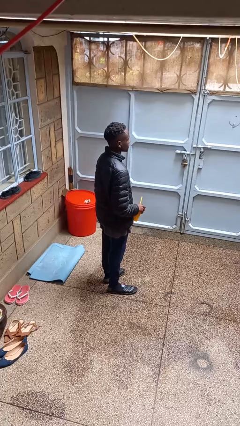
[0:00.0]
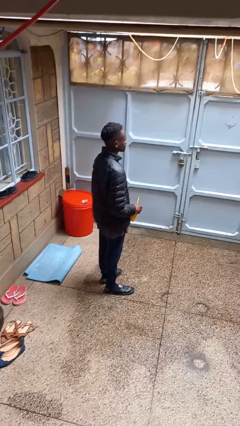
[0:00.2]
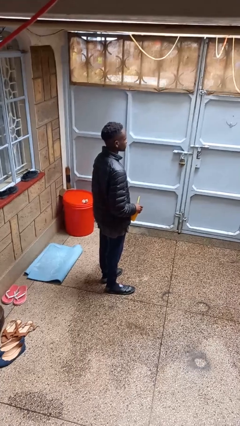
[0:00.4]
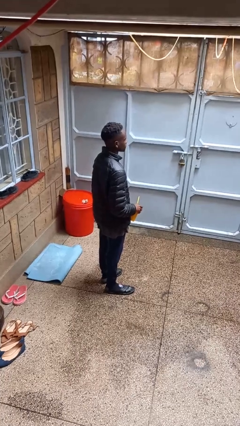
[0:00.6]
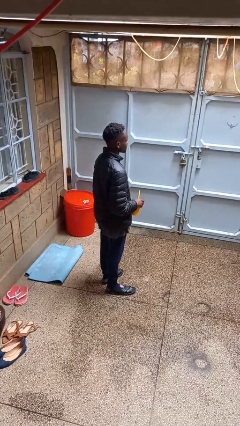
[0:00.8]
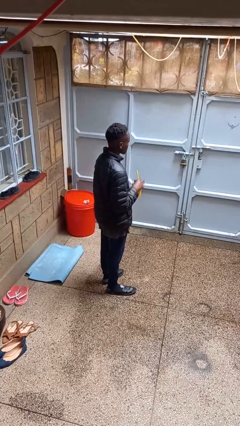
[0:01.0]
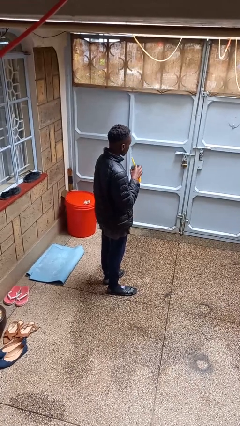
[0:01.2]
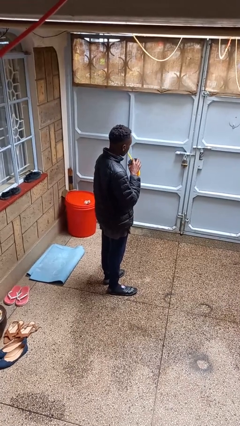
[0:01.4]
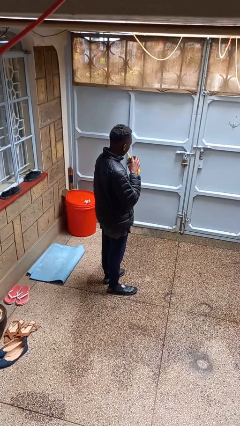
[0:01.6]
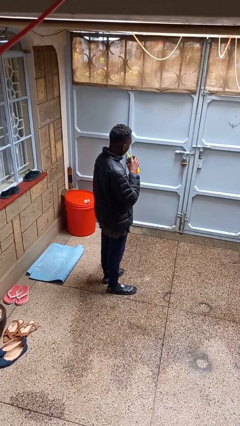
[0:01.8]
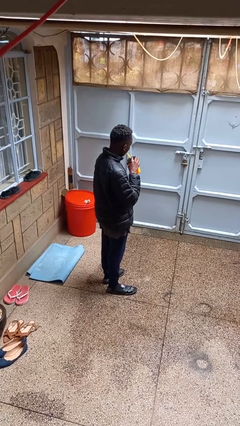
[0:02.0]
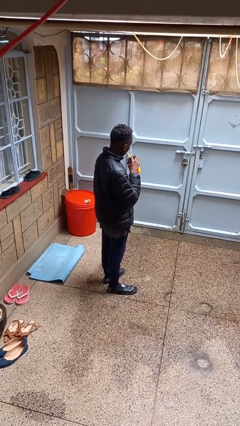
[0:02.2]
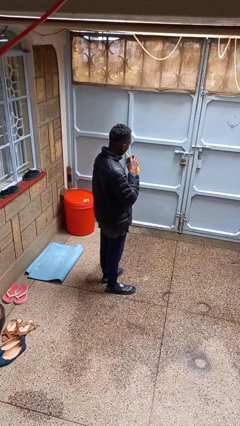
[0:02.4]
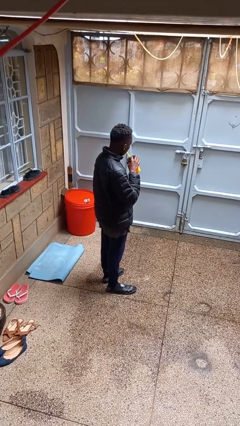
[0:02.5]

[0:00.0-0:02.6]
person drinks from straw

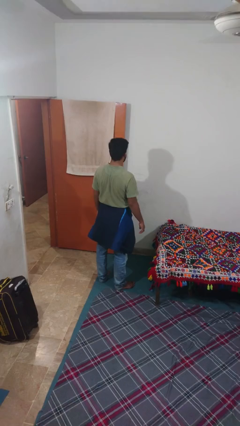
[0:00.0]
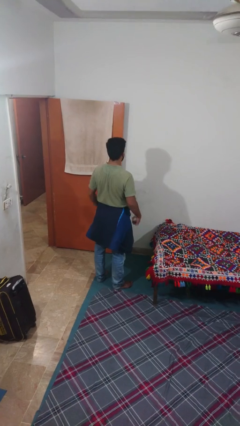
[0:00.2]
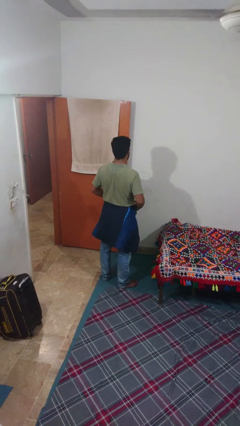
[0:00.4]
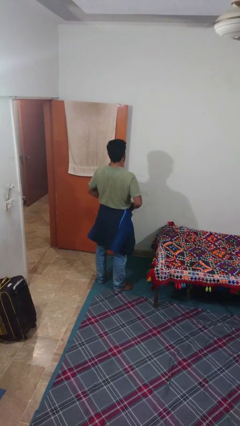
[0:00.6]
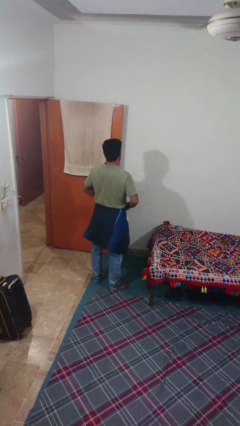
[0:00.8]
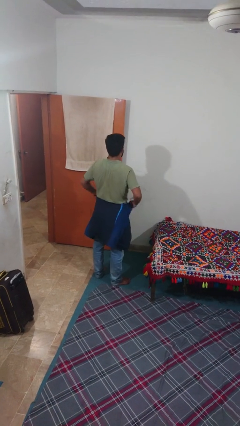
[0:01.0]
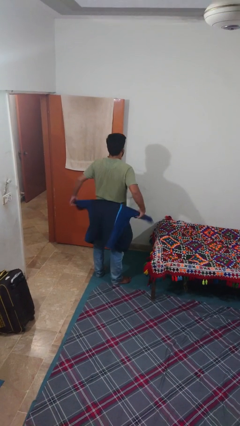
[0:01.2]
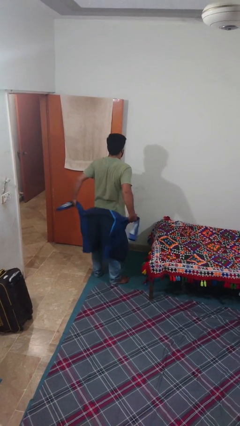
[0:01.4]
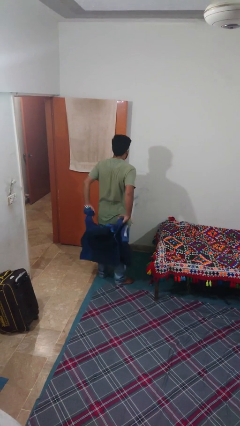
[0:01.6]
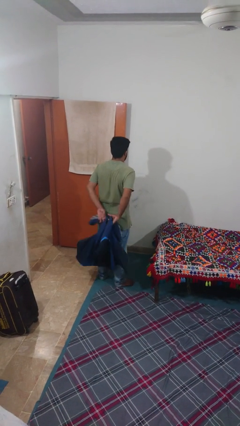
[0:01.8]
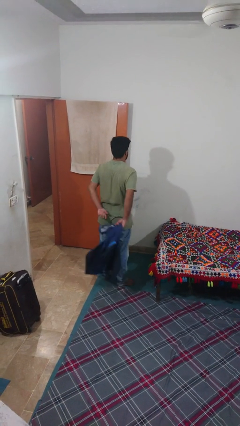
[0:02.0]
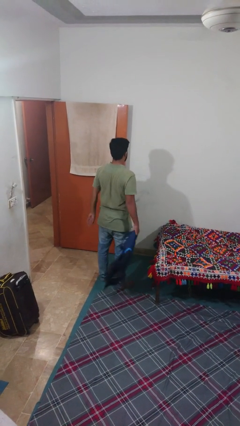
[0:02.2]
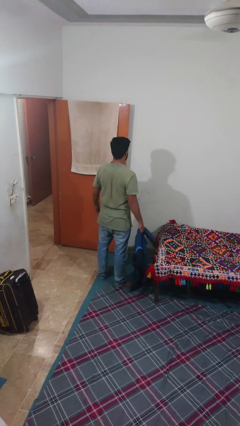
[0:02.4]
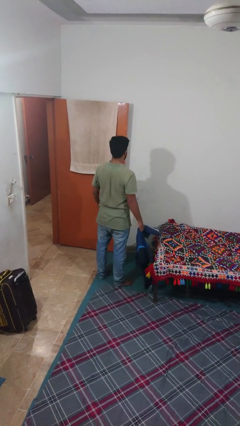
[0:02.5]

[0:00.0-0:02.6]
person unties jacket around waist

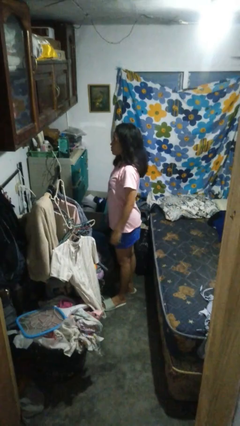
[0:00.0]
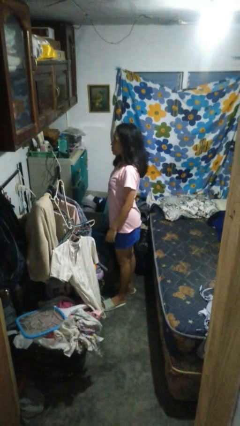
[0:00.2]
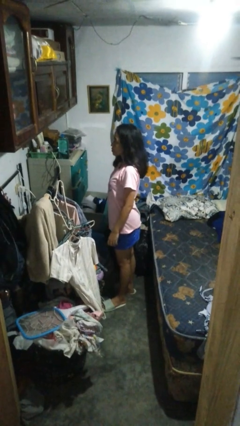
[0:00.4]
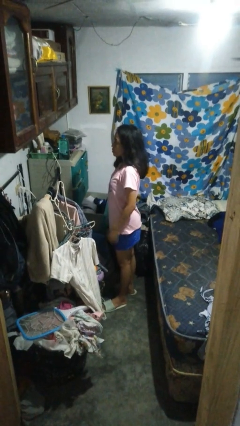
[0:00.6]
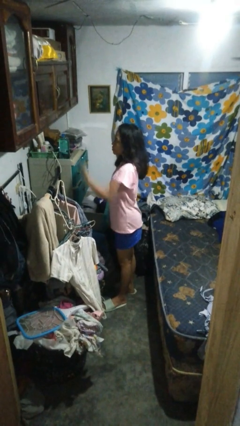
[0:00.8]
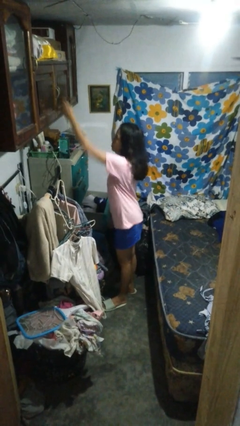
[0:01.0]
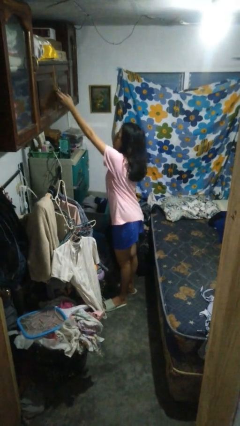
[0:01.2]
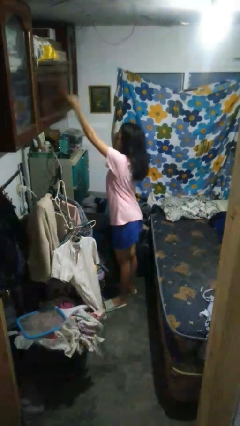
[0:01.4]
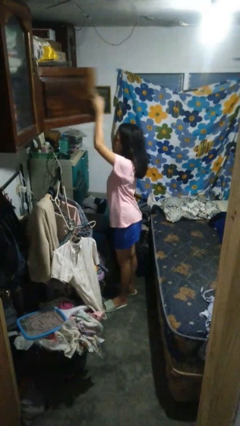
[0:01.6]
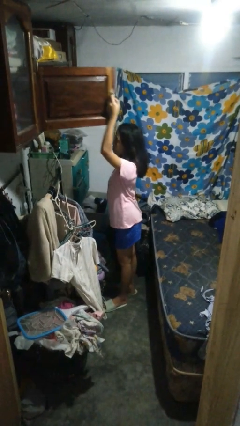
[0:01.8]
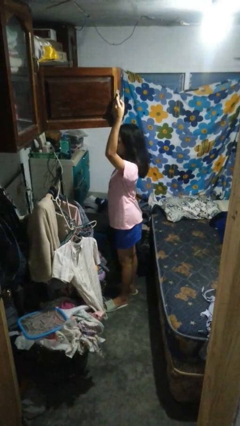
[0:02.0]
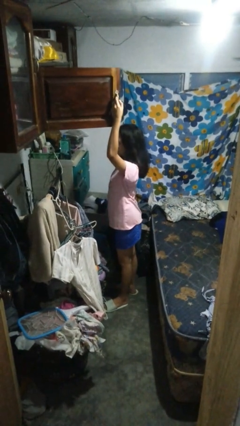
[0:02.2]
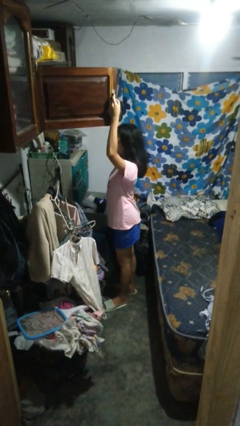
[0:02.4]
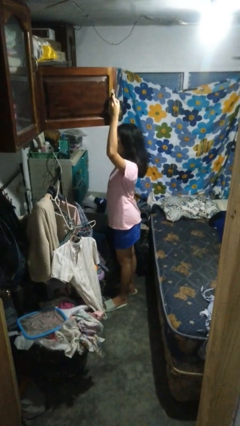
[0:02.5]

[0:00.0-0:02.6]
person opens closet door

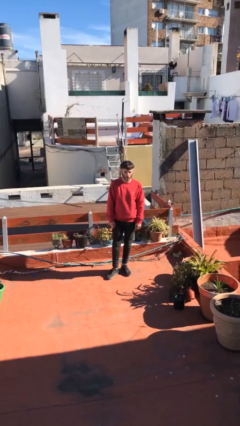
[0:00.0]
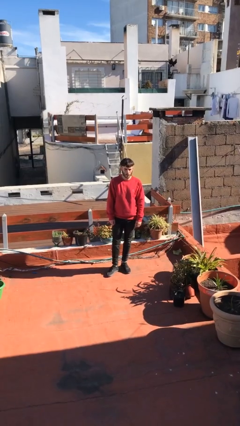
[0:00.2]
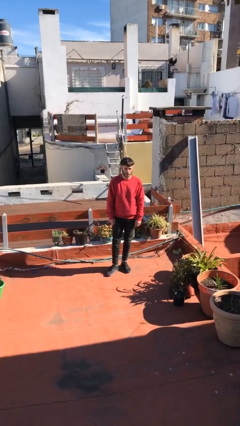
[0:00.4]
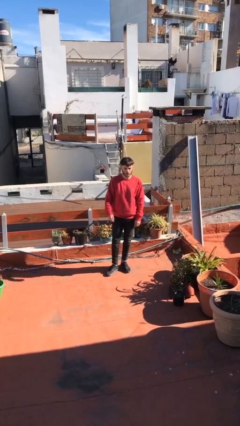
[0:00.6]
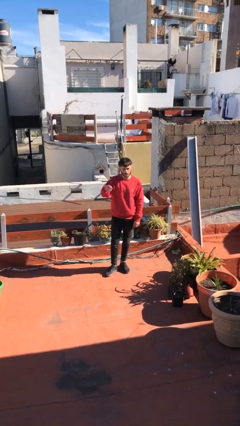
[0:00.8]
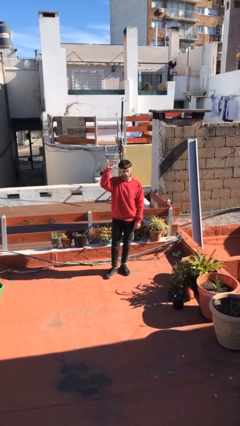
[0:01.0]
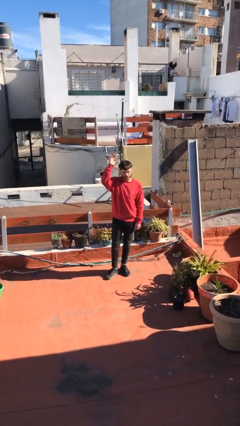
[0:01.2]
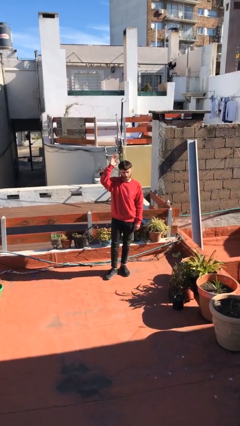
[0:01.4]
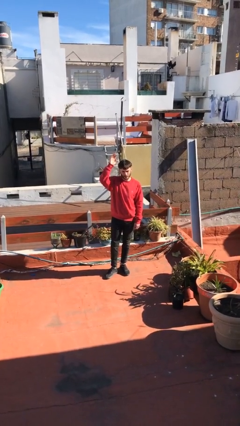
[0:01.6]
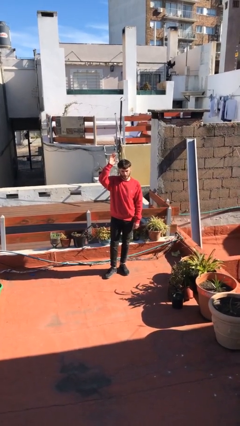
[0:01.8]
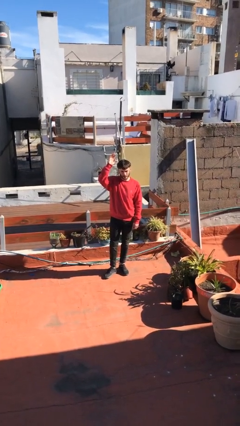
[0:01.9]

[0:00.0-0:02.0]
person gestures raise hand

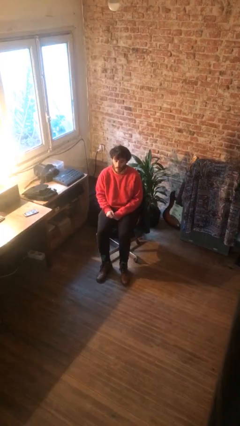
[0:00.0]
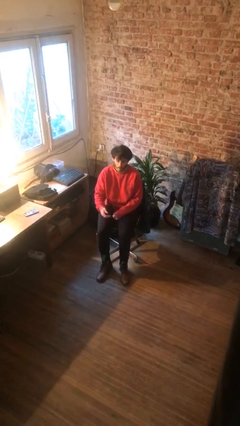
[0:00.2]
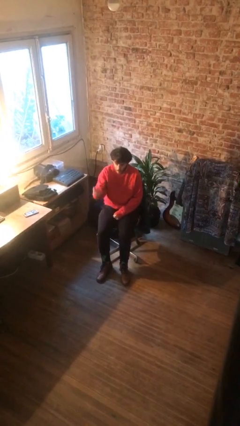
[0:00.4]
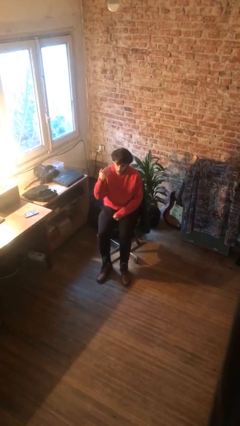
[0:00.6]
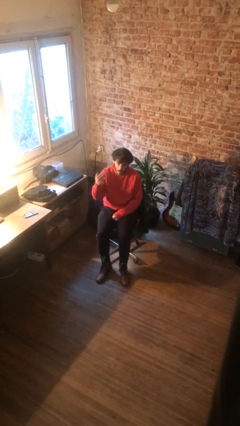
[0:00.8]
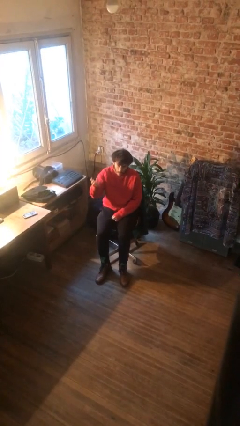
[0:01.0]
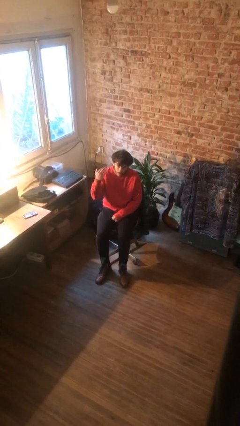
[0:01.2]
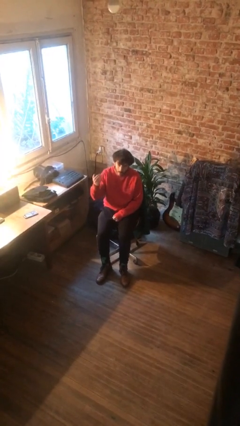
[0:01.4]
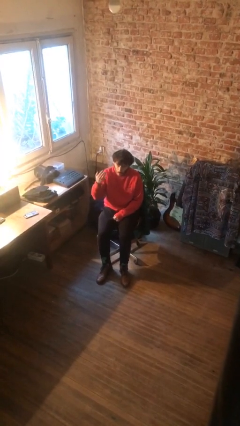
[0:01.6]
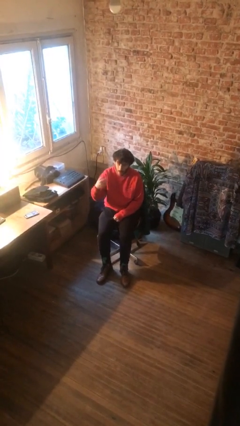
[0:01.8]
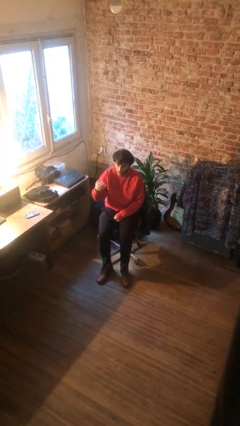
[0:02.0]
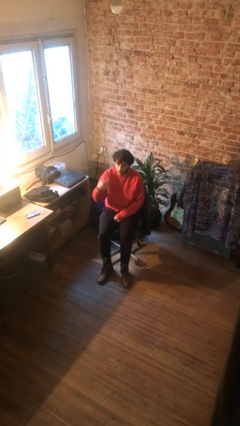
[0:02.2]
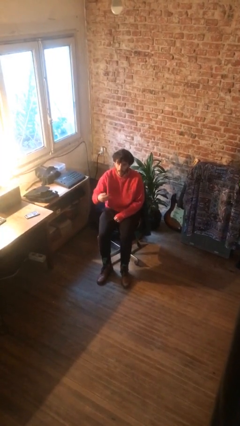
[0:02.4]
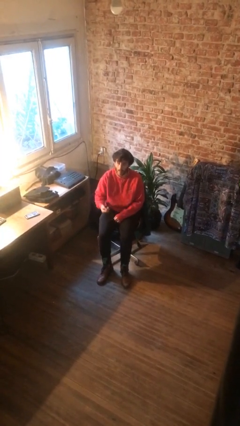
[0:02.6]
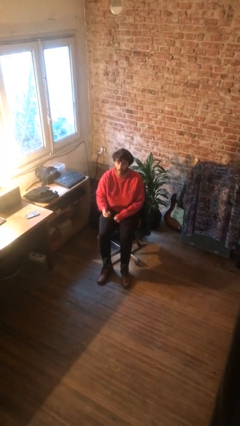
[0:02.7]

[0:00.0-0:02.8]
person gestures come here

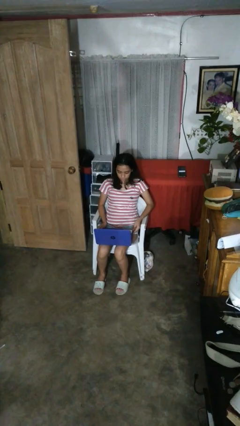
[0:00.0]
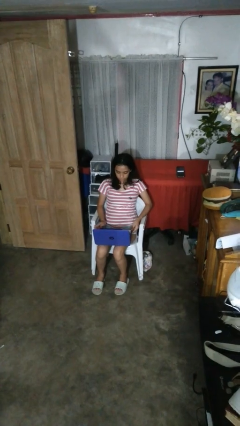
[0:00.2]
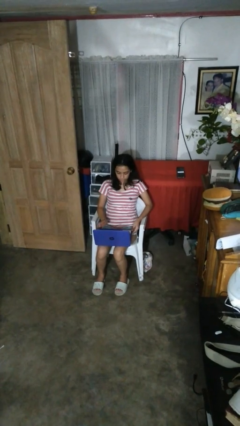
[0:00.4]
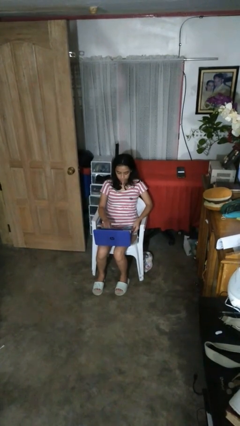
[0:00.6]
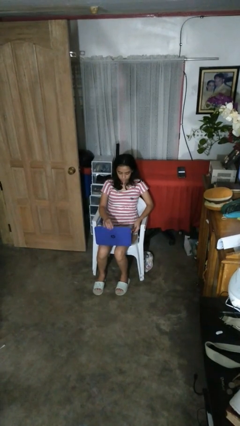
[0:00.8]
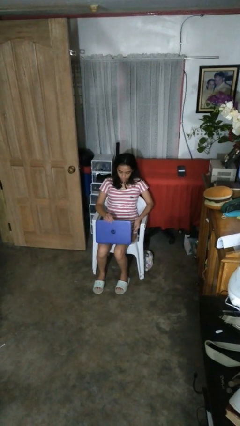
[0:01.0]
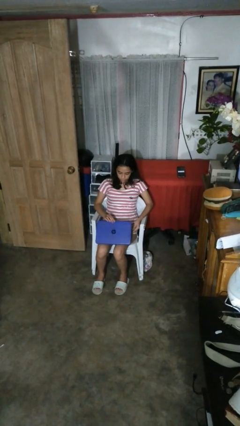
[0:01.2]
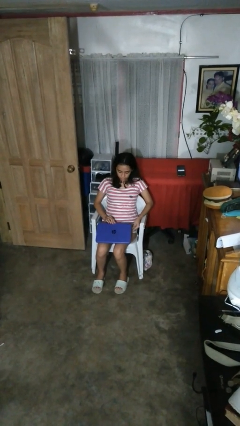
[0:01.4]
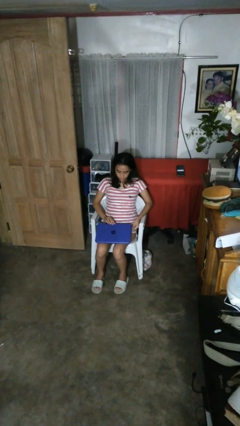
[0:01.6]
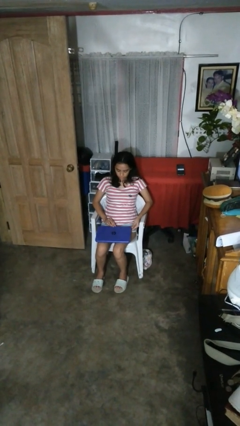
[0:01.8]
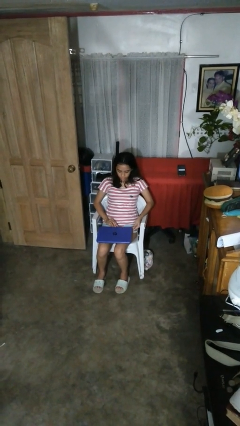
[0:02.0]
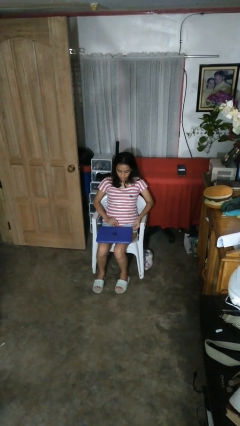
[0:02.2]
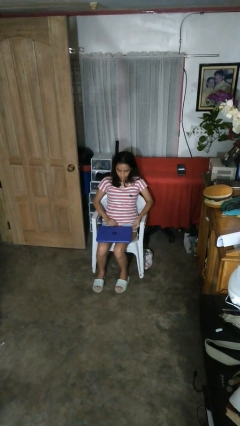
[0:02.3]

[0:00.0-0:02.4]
person closes laptop

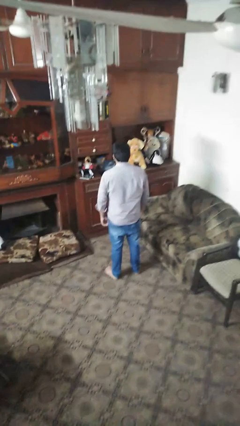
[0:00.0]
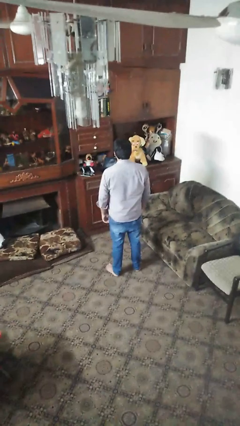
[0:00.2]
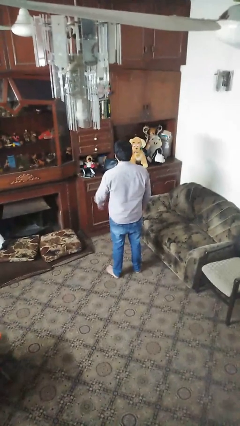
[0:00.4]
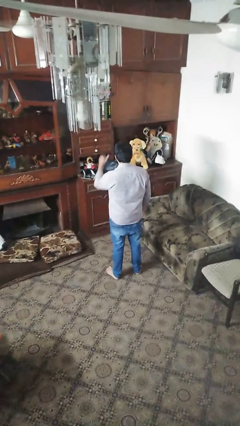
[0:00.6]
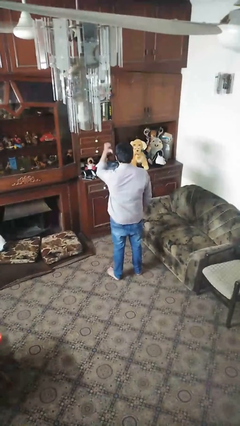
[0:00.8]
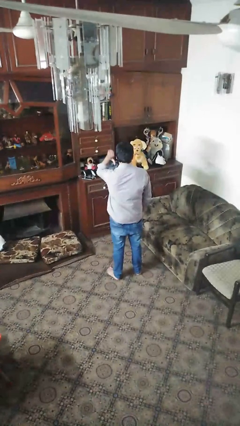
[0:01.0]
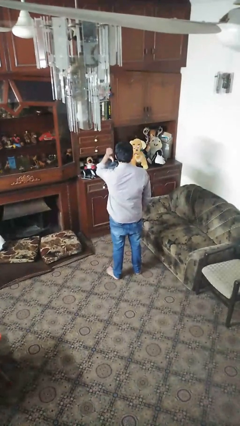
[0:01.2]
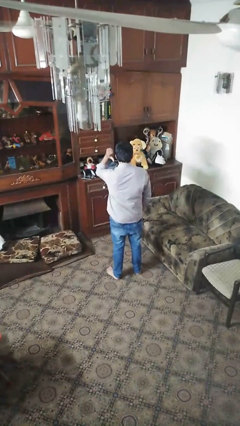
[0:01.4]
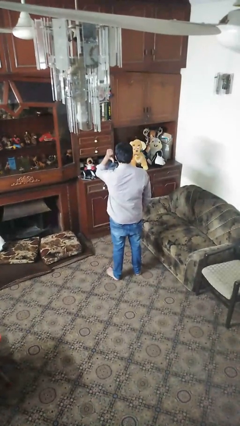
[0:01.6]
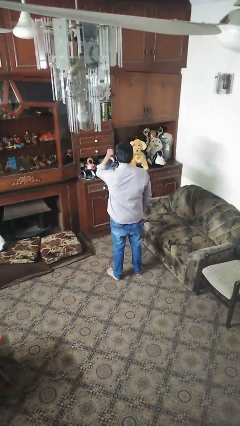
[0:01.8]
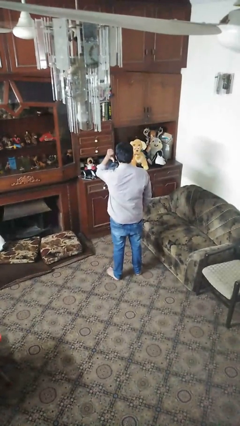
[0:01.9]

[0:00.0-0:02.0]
person gestures behind me
